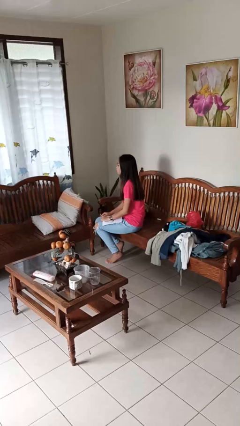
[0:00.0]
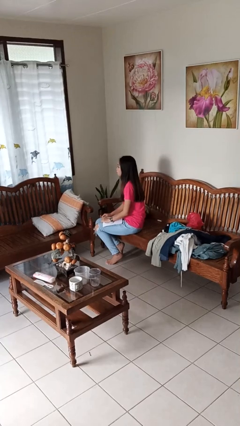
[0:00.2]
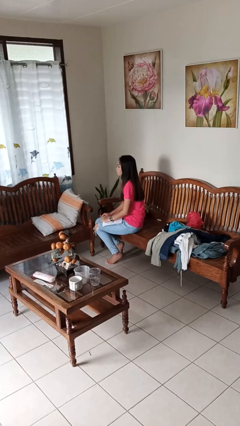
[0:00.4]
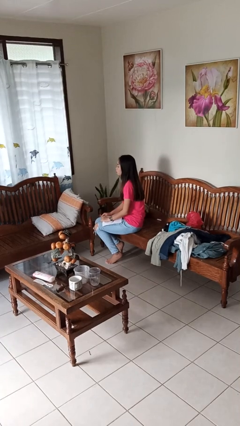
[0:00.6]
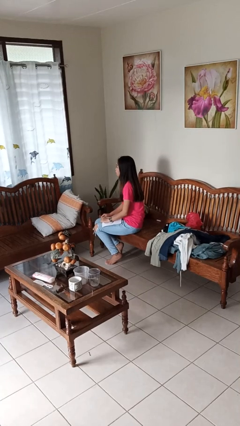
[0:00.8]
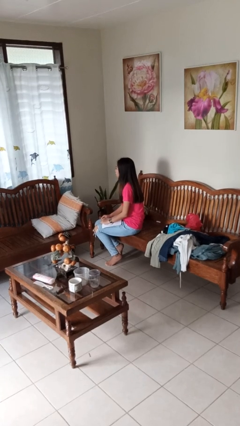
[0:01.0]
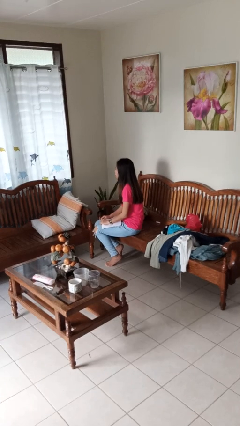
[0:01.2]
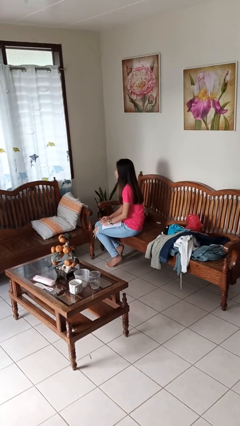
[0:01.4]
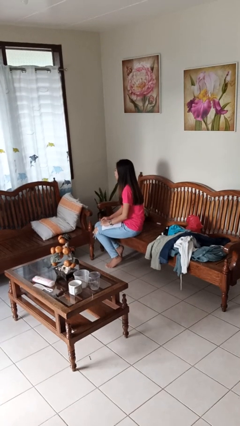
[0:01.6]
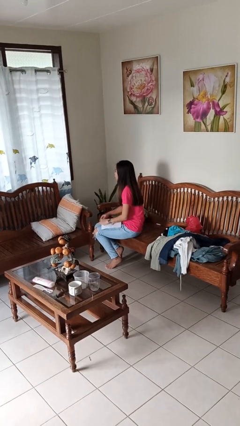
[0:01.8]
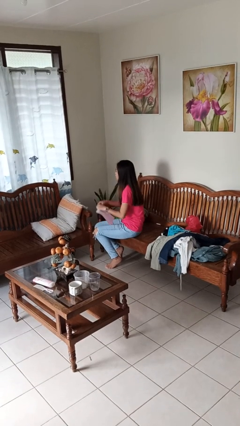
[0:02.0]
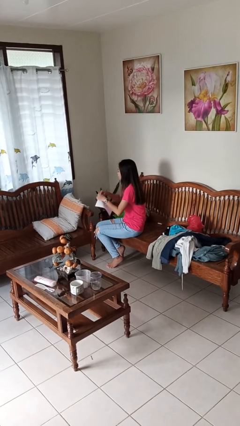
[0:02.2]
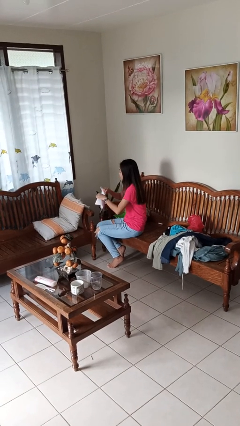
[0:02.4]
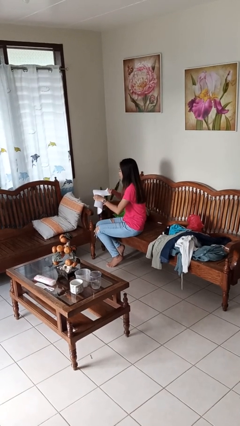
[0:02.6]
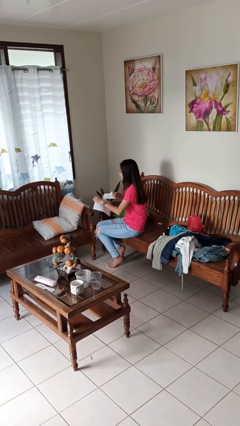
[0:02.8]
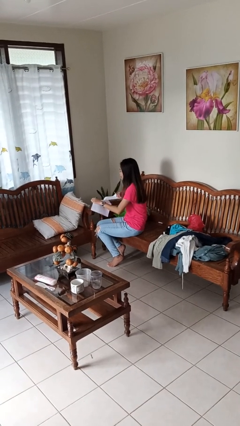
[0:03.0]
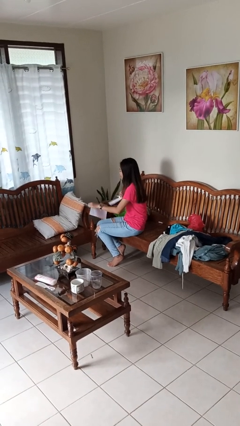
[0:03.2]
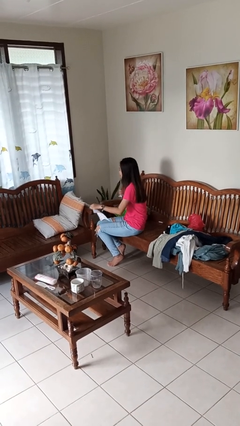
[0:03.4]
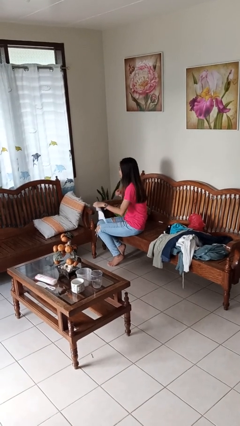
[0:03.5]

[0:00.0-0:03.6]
person tears paper

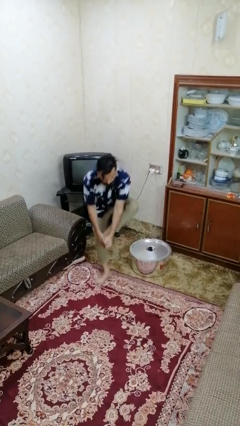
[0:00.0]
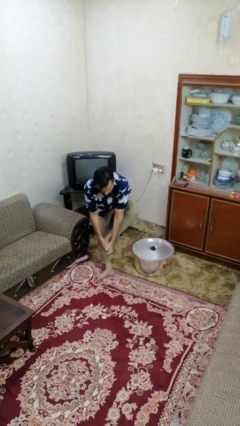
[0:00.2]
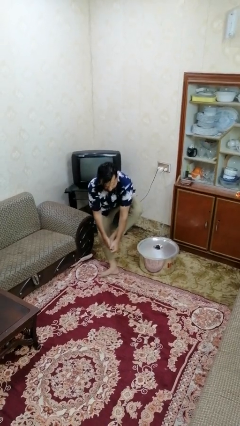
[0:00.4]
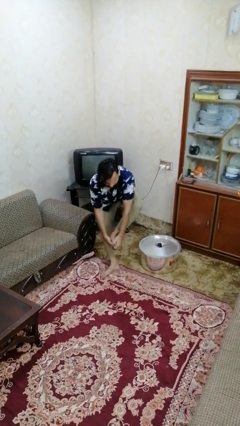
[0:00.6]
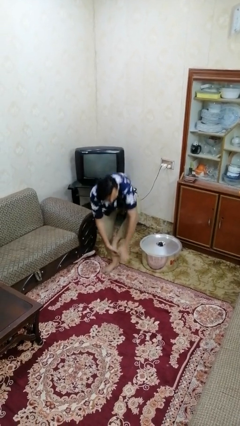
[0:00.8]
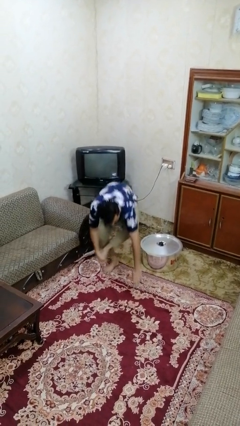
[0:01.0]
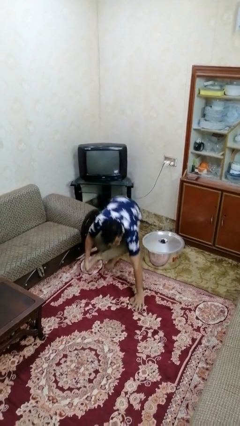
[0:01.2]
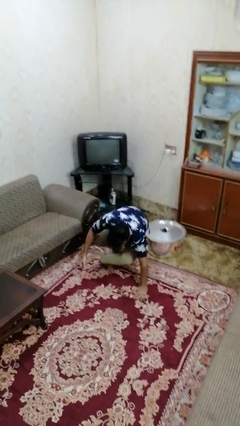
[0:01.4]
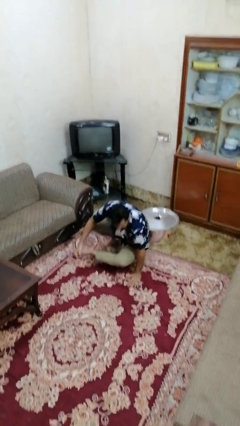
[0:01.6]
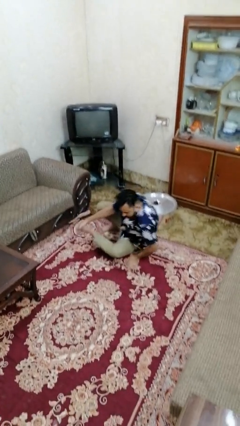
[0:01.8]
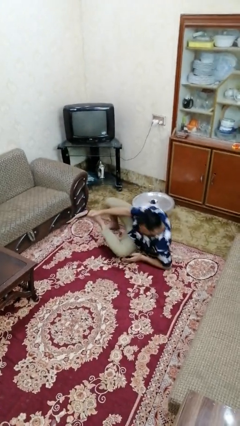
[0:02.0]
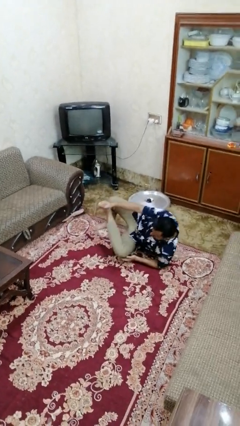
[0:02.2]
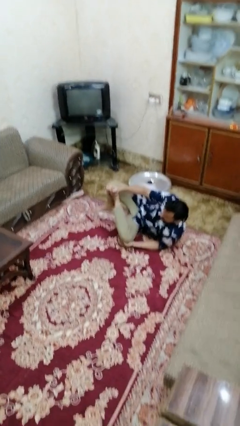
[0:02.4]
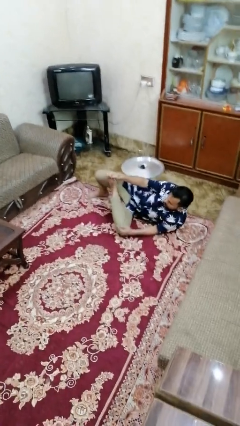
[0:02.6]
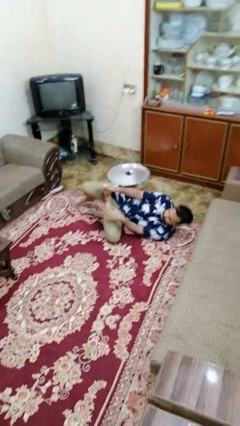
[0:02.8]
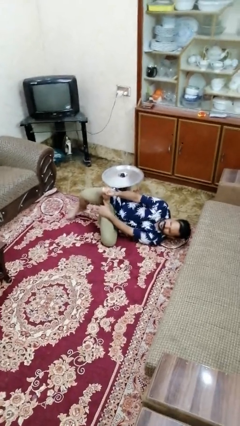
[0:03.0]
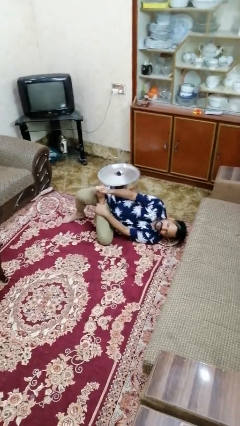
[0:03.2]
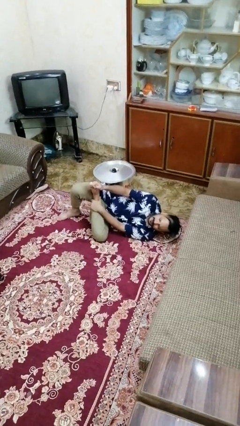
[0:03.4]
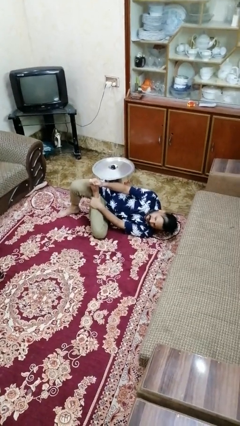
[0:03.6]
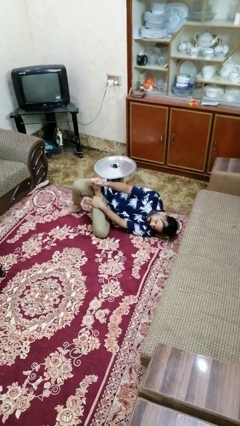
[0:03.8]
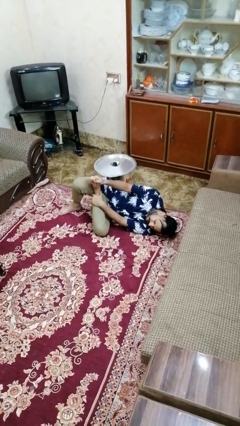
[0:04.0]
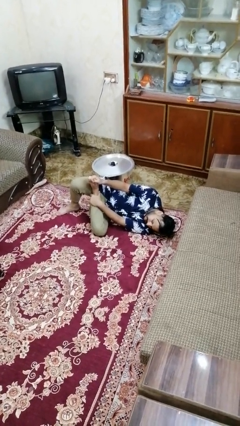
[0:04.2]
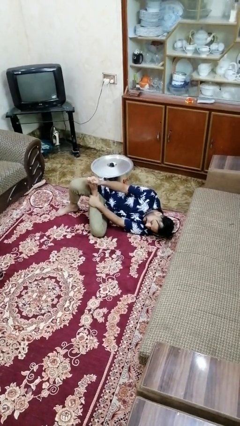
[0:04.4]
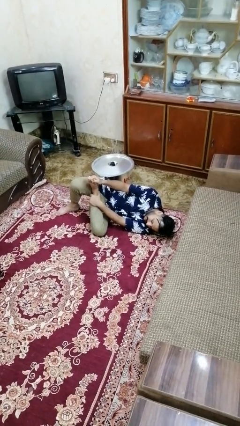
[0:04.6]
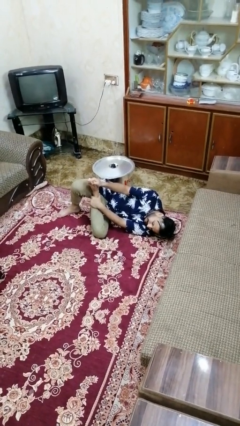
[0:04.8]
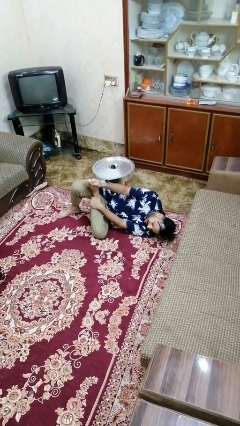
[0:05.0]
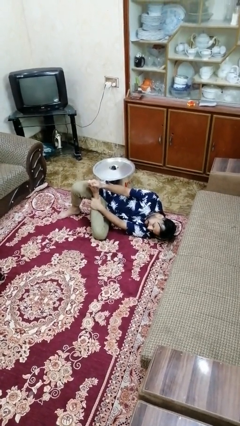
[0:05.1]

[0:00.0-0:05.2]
person lies down on floor

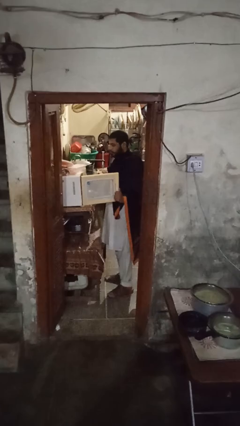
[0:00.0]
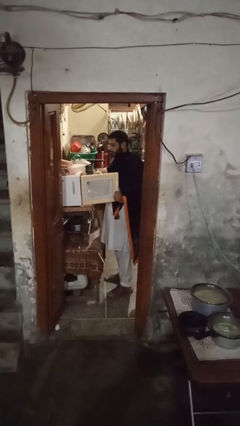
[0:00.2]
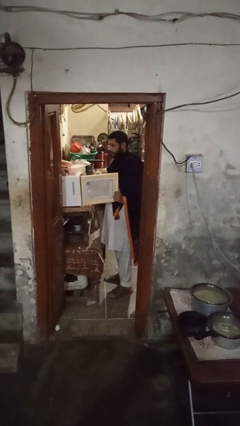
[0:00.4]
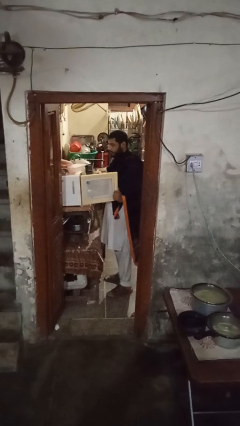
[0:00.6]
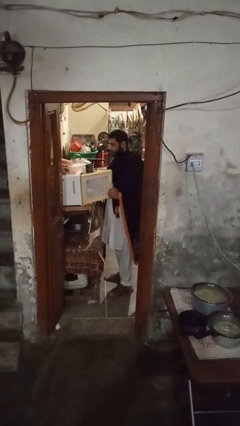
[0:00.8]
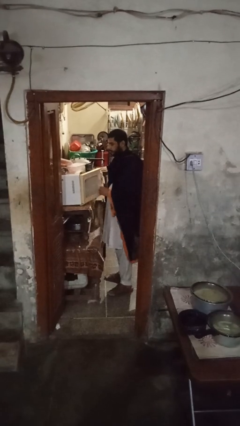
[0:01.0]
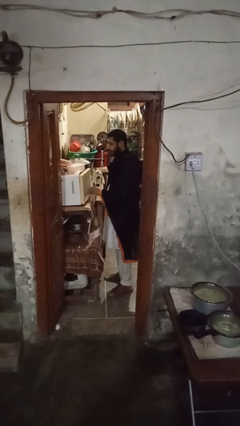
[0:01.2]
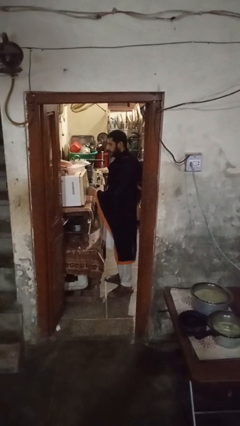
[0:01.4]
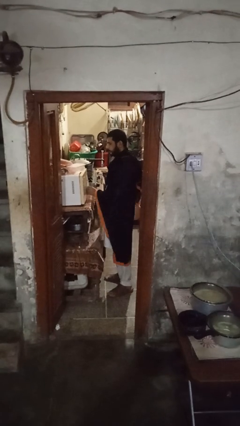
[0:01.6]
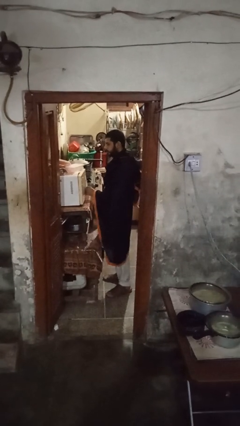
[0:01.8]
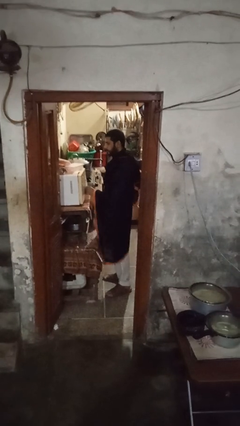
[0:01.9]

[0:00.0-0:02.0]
person closes microwave

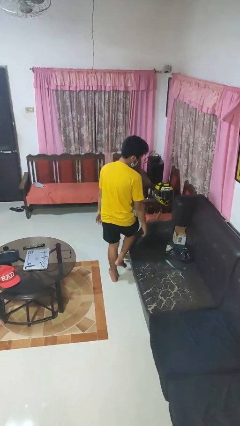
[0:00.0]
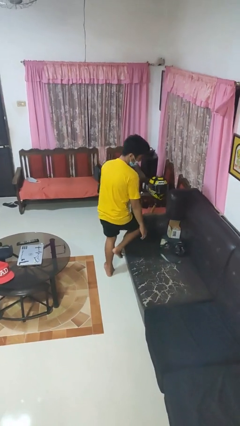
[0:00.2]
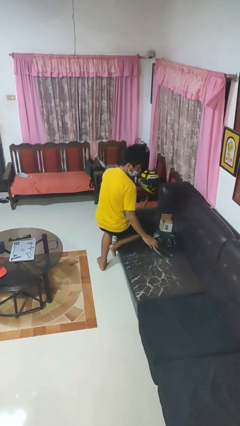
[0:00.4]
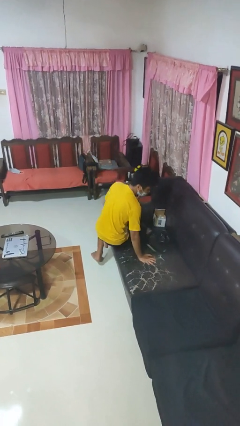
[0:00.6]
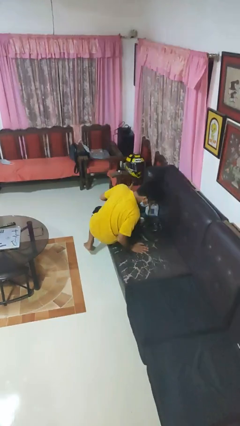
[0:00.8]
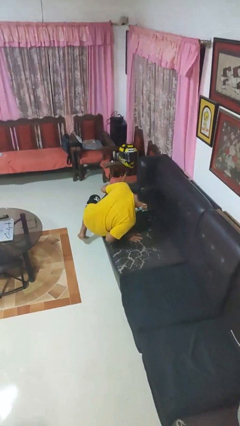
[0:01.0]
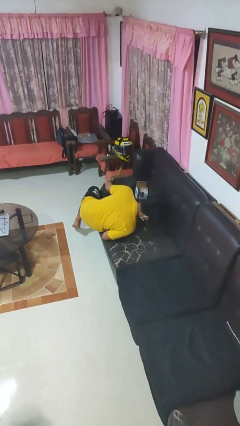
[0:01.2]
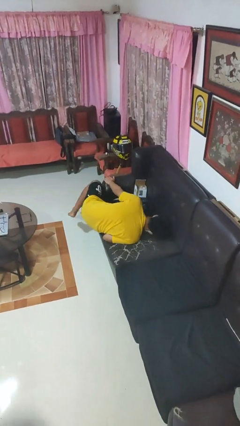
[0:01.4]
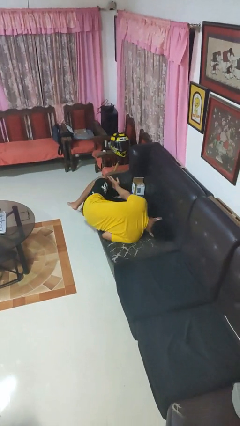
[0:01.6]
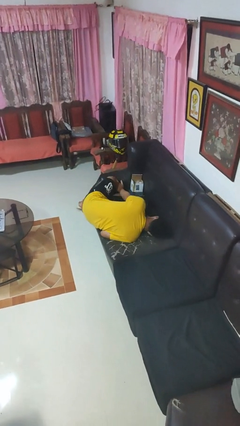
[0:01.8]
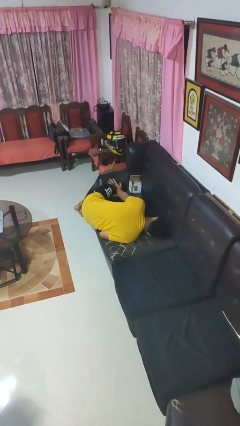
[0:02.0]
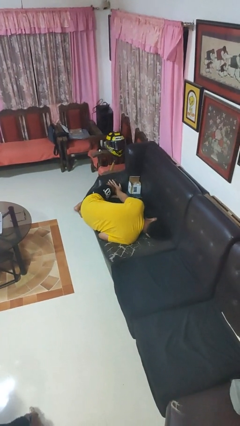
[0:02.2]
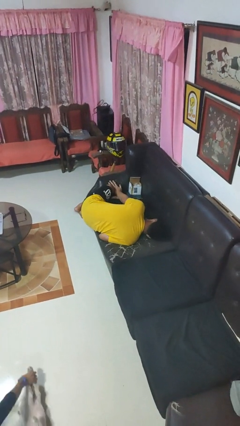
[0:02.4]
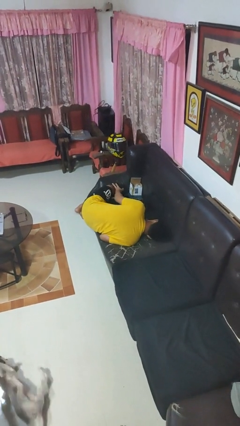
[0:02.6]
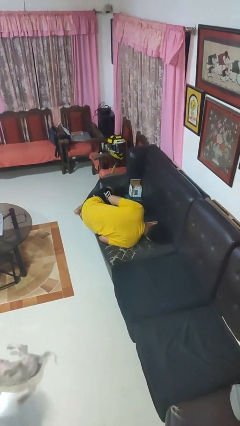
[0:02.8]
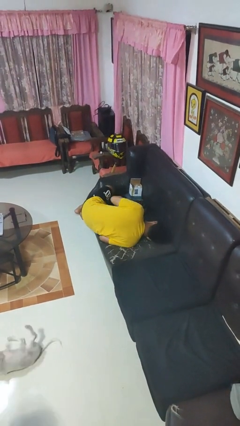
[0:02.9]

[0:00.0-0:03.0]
person lies down on couch

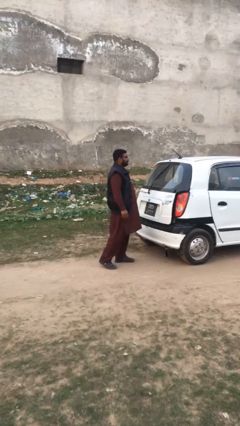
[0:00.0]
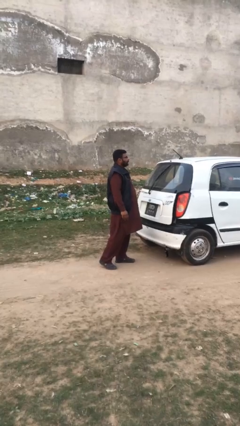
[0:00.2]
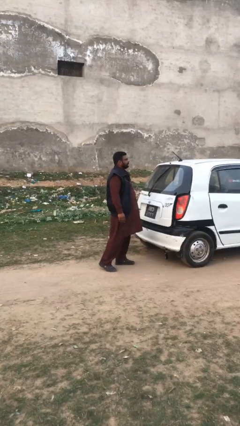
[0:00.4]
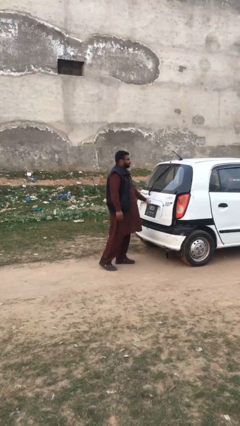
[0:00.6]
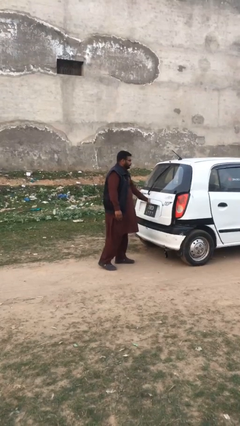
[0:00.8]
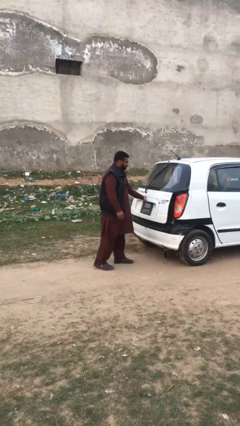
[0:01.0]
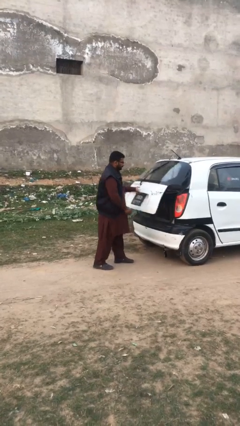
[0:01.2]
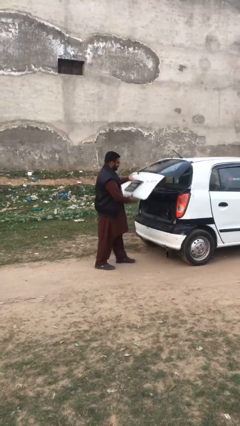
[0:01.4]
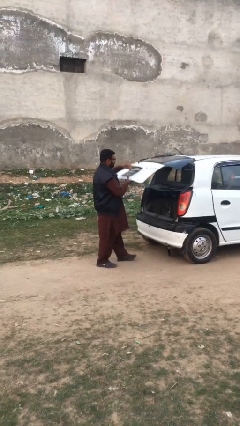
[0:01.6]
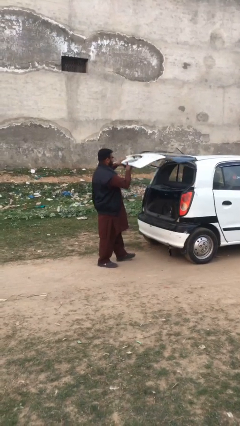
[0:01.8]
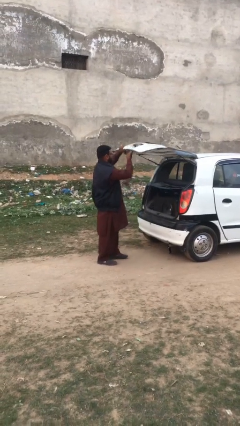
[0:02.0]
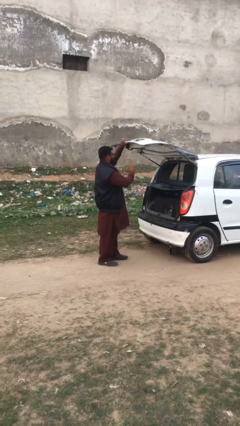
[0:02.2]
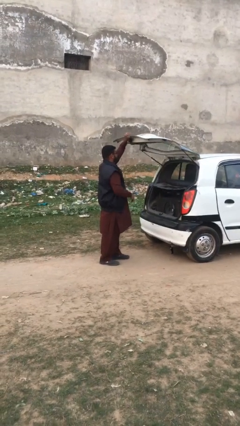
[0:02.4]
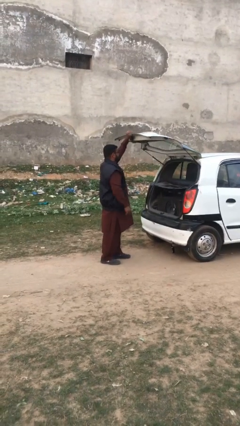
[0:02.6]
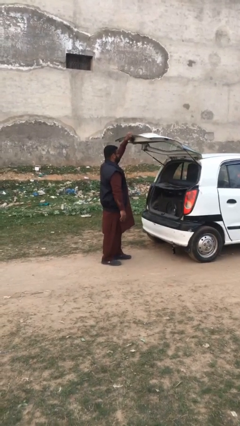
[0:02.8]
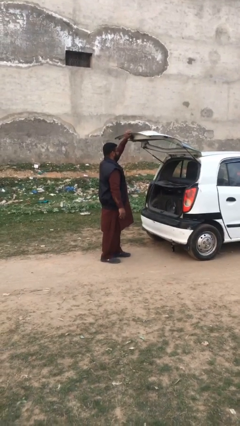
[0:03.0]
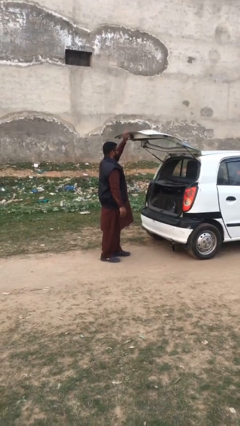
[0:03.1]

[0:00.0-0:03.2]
person opens car trunk

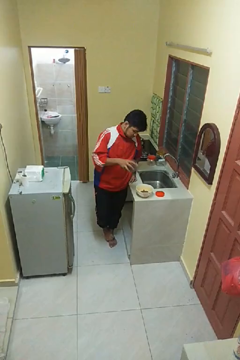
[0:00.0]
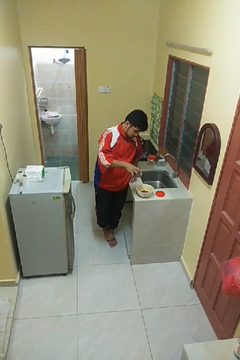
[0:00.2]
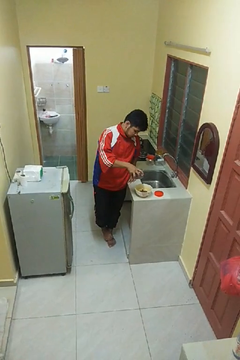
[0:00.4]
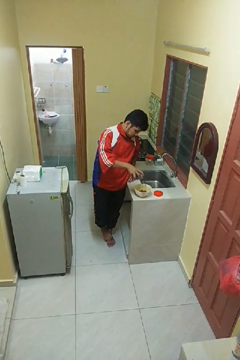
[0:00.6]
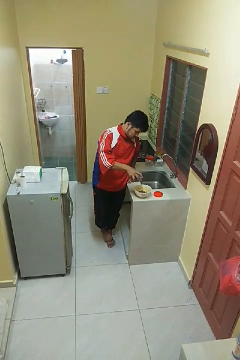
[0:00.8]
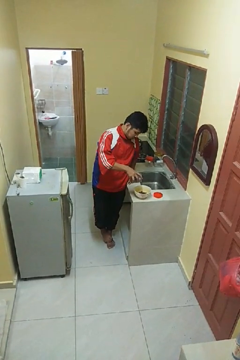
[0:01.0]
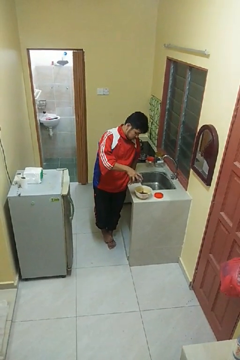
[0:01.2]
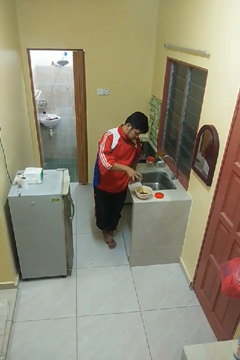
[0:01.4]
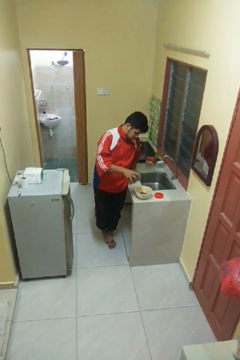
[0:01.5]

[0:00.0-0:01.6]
person pours into bowl
